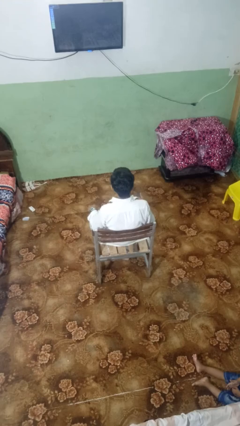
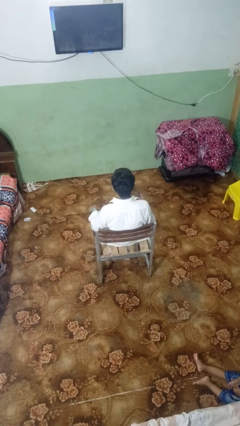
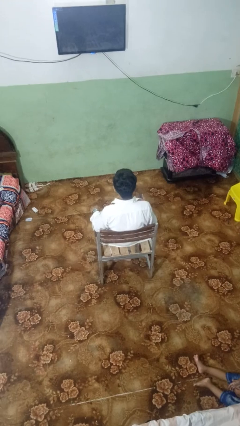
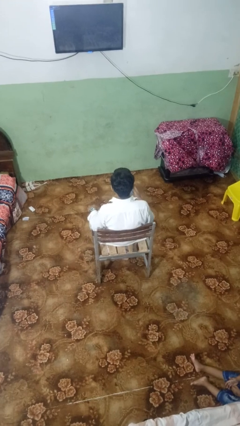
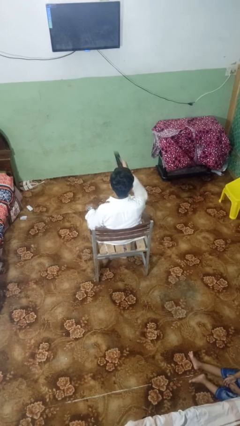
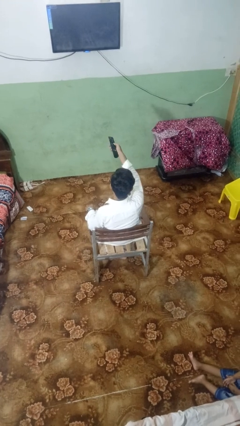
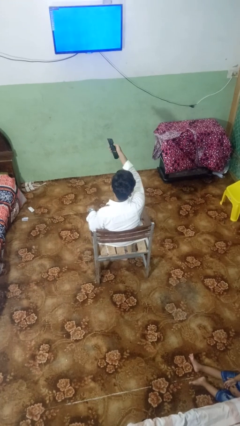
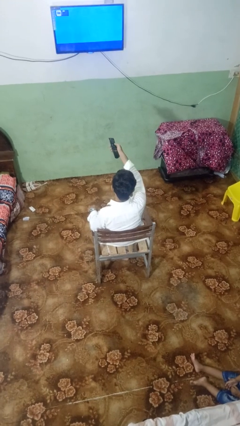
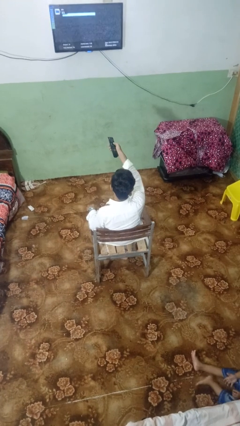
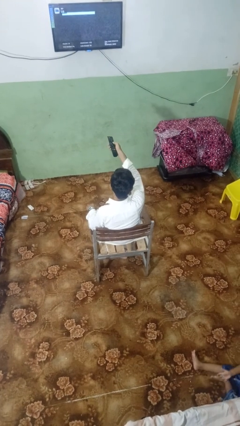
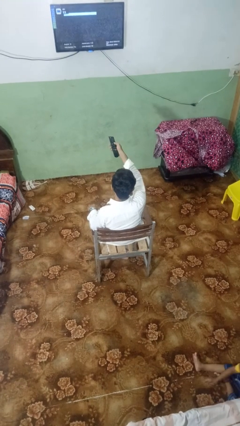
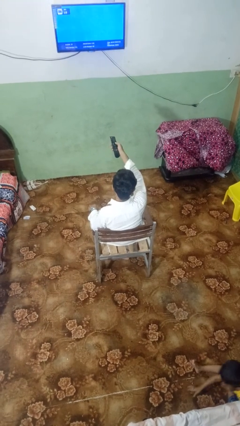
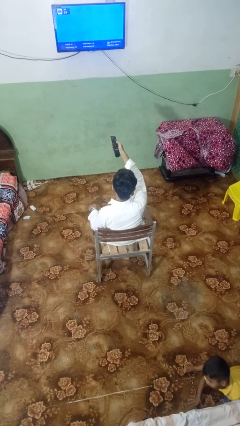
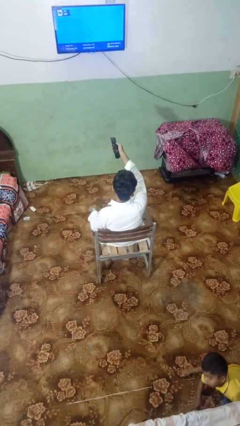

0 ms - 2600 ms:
person uses television remote

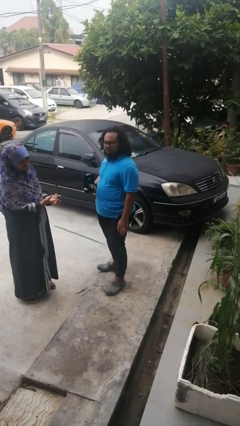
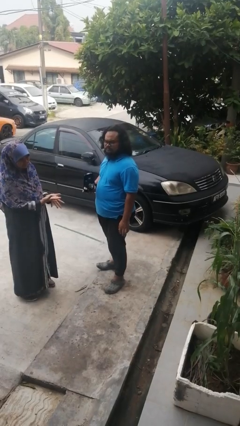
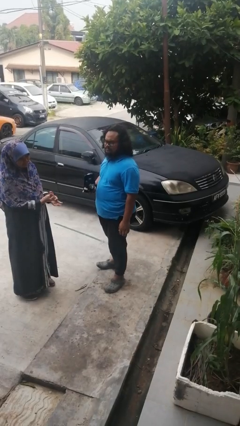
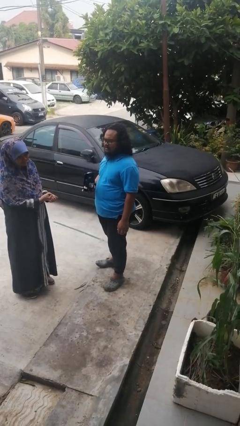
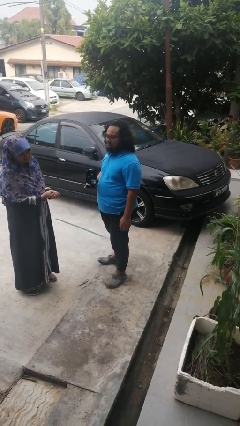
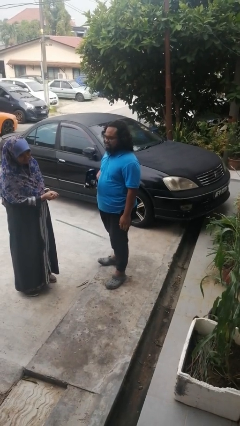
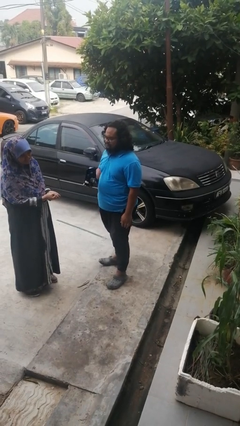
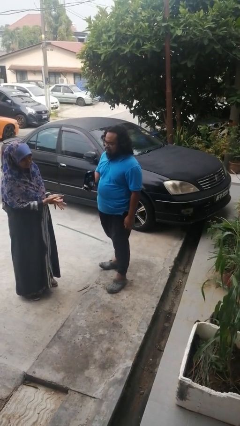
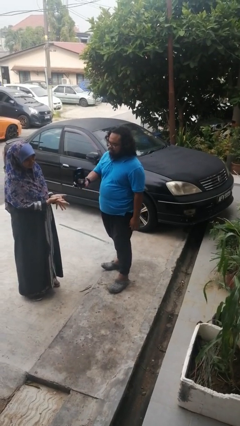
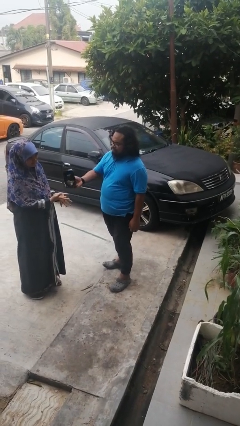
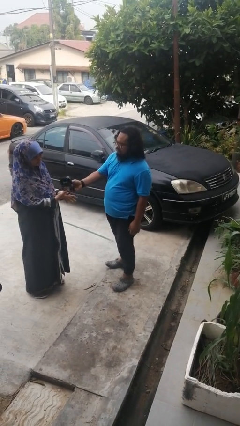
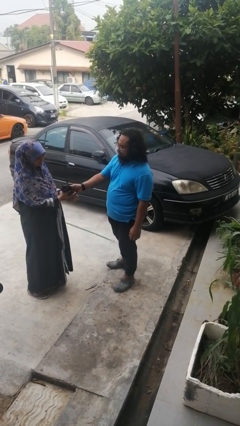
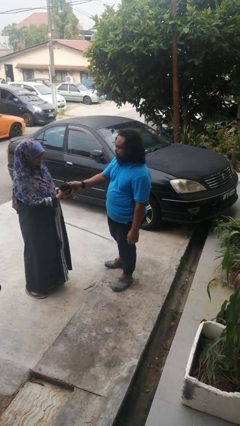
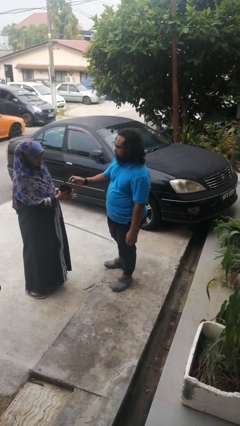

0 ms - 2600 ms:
person transfers object to person

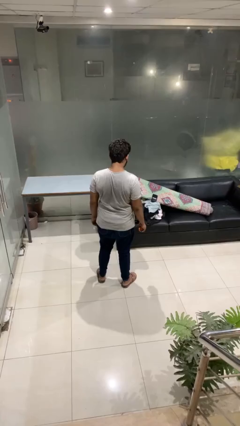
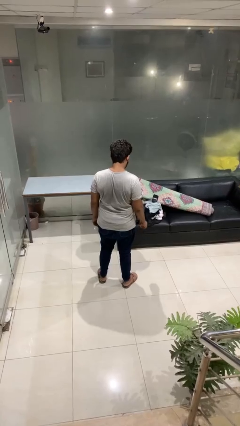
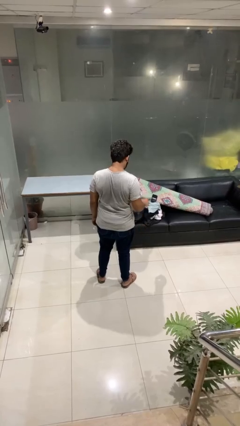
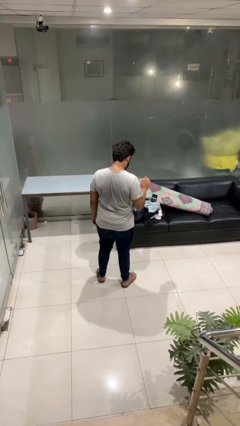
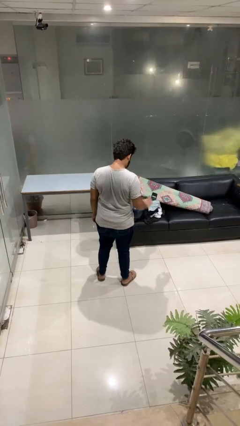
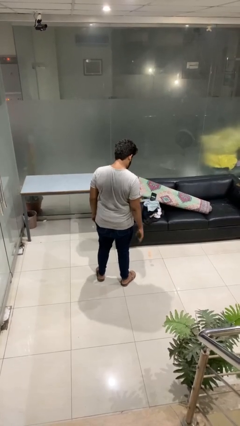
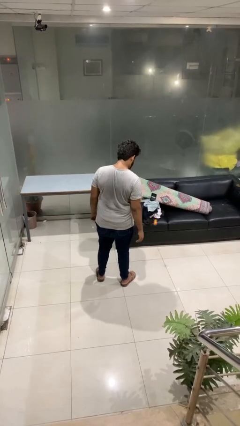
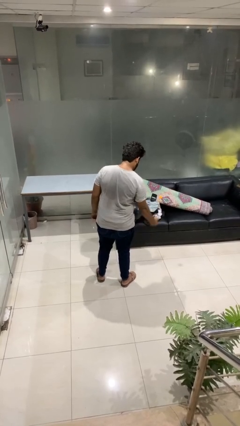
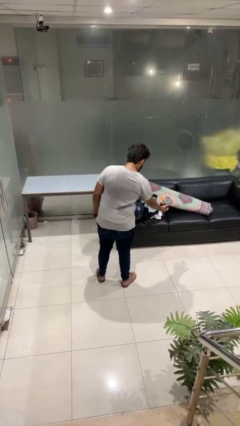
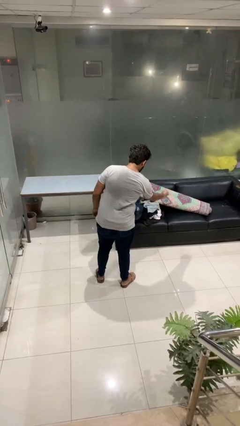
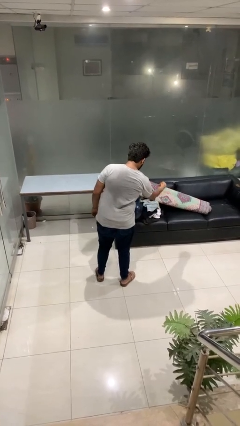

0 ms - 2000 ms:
person bounces ball on floor

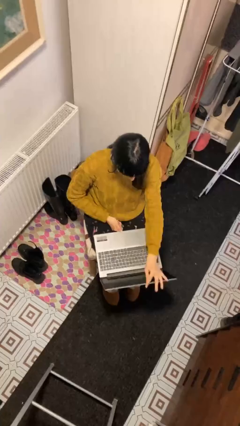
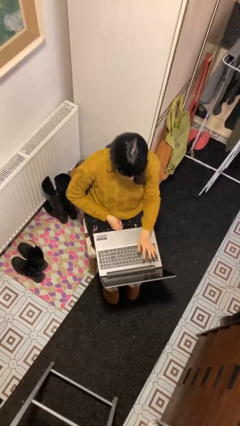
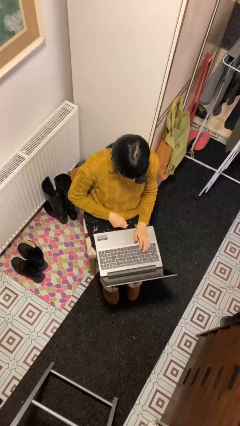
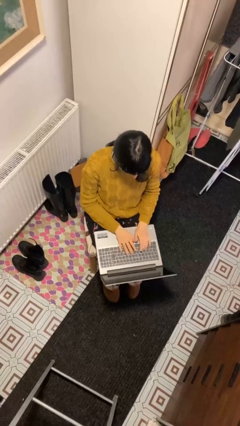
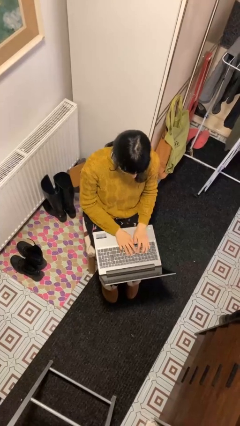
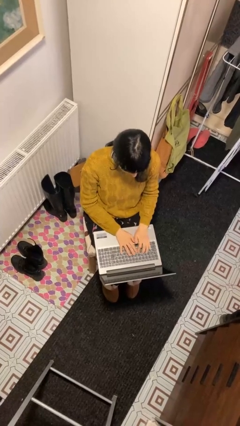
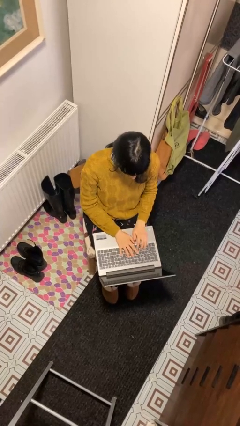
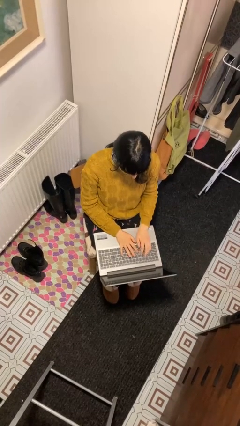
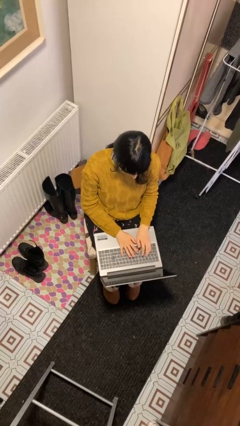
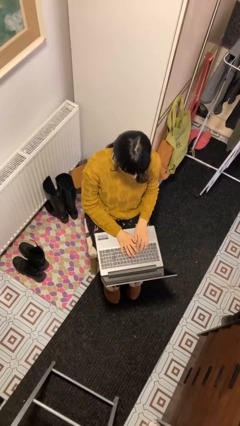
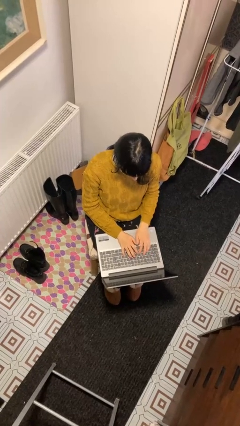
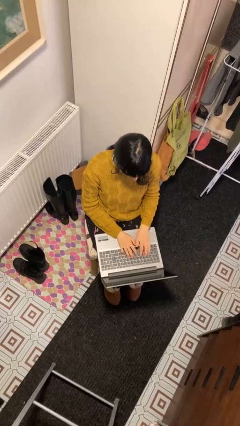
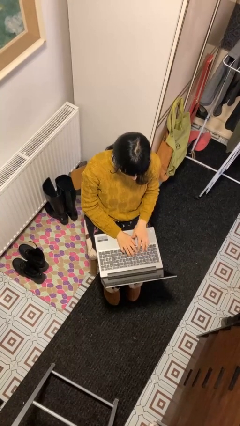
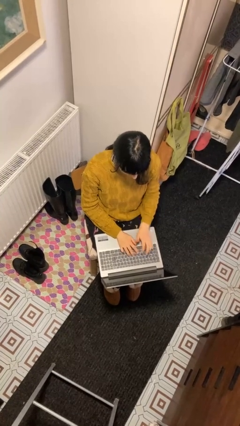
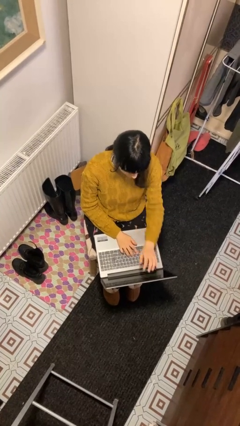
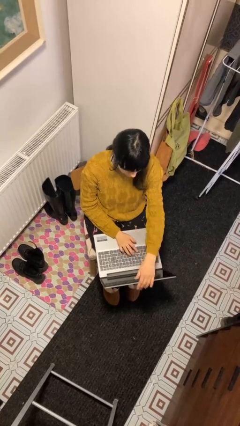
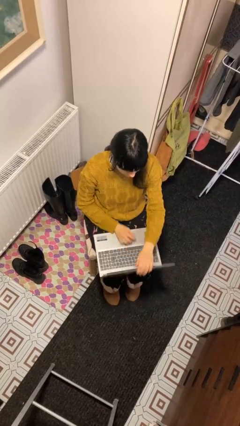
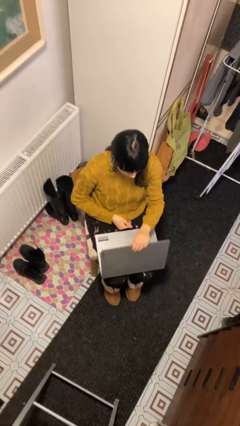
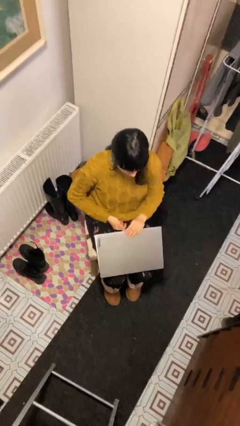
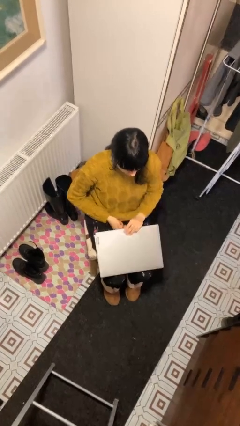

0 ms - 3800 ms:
person interacts with laptop

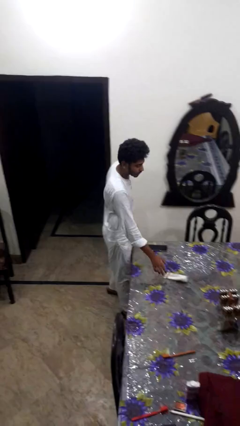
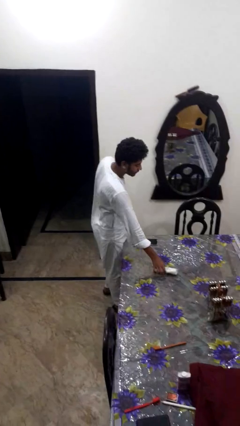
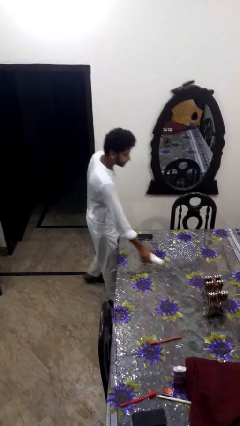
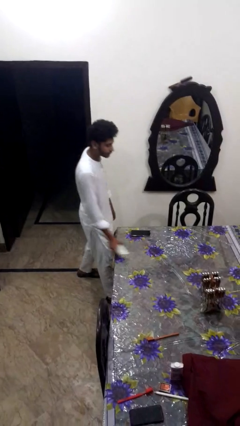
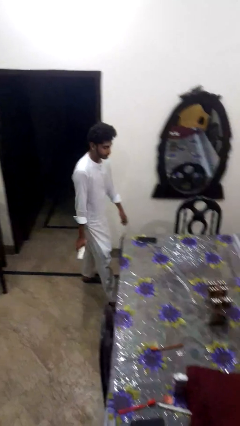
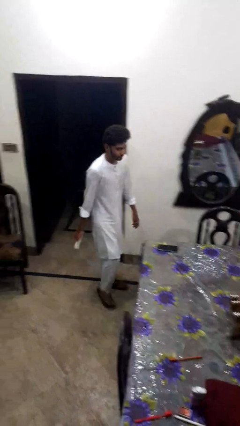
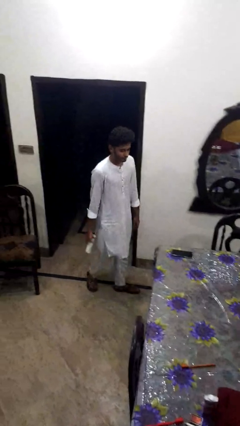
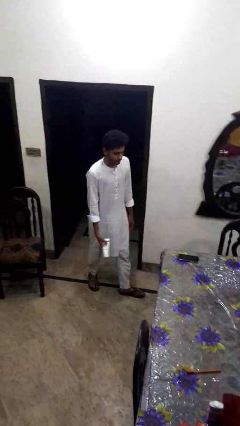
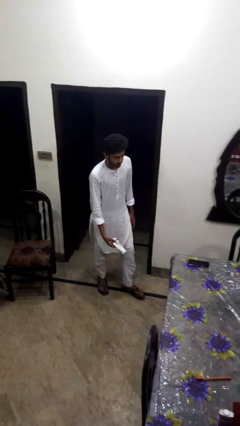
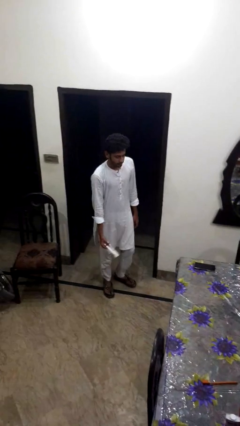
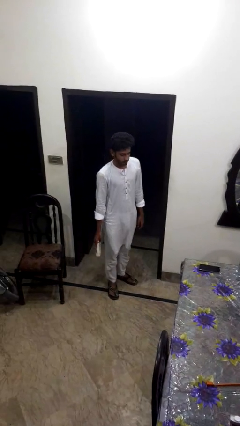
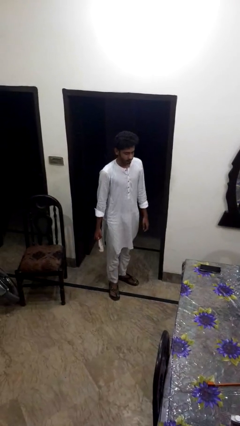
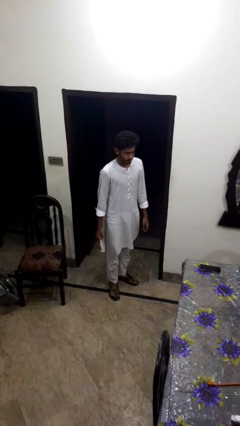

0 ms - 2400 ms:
person picks up object from table

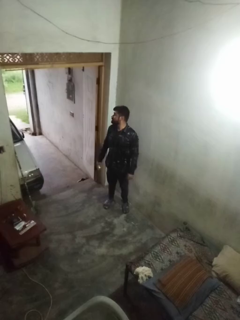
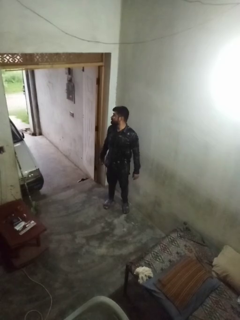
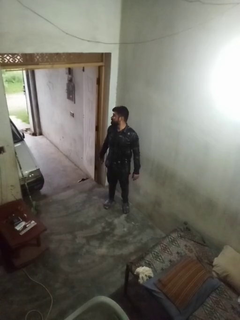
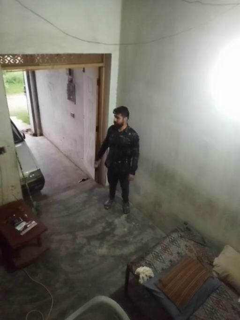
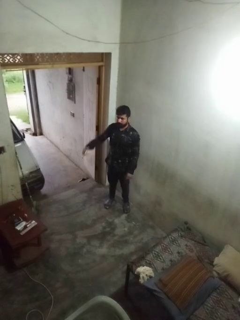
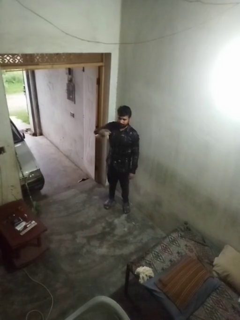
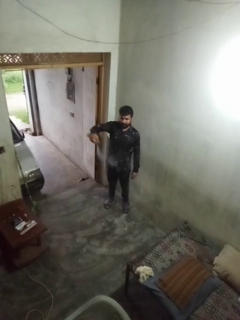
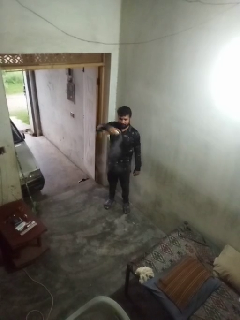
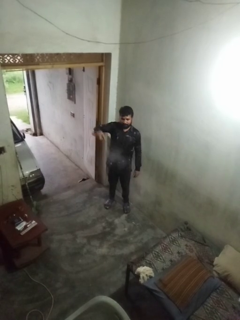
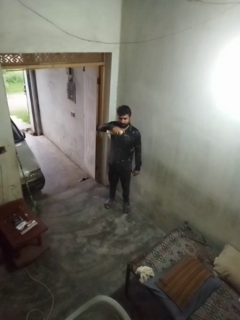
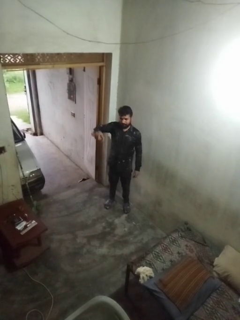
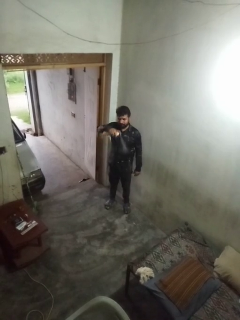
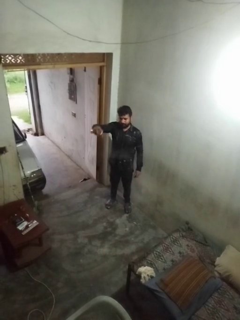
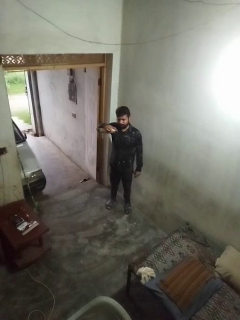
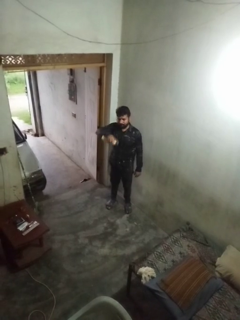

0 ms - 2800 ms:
person applies deodorant

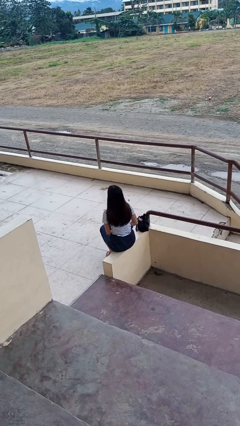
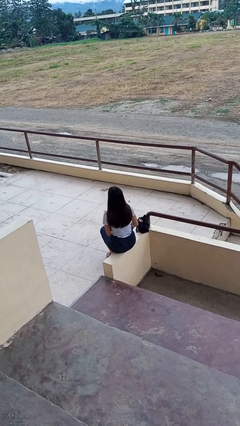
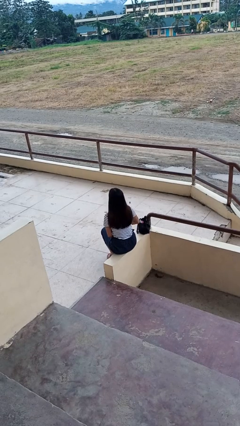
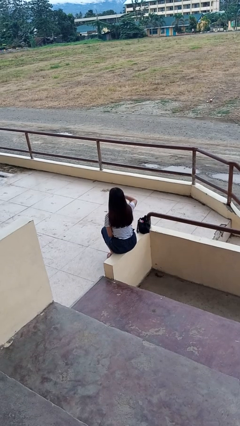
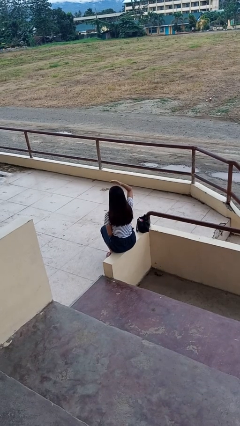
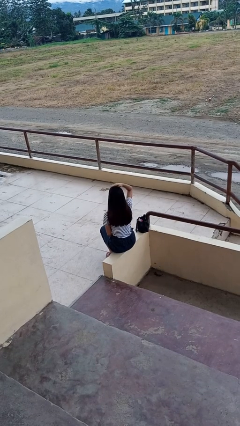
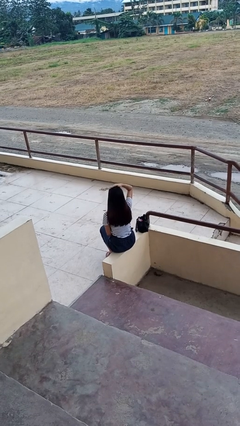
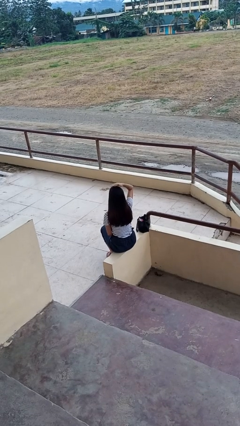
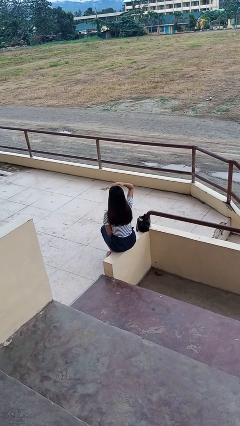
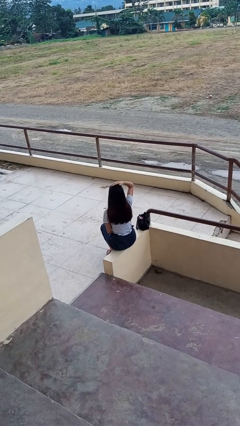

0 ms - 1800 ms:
person pats head
